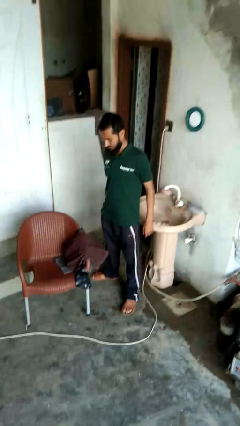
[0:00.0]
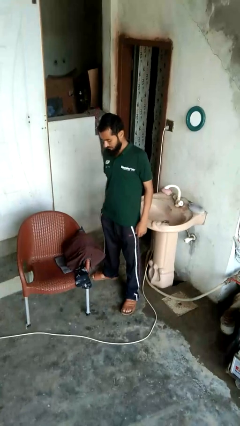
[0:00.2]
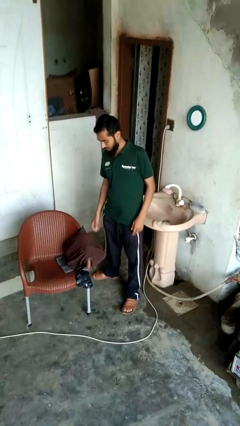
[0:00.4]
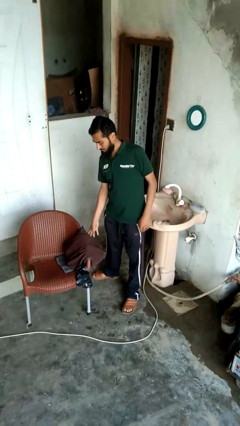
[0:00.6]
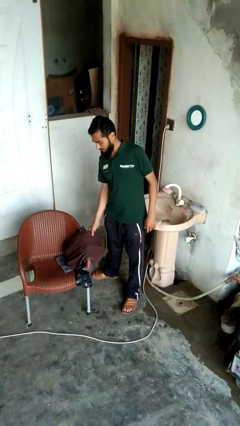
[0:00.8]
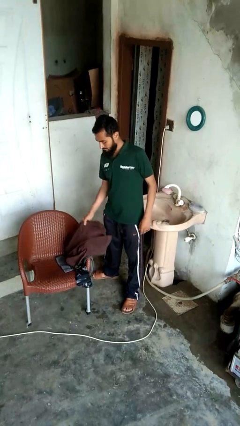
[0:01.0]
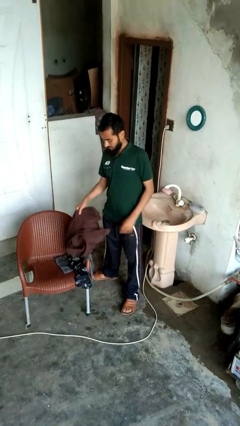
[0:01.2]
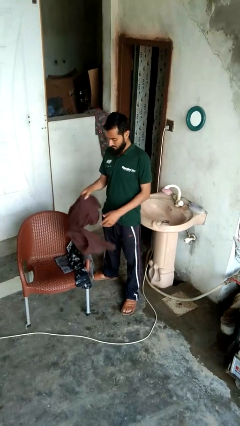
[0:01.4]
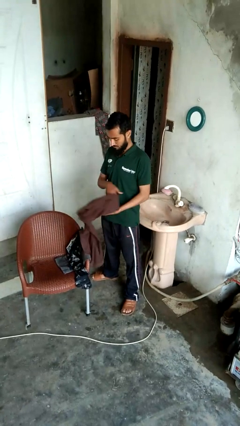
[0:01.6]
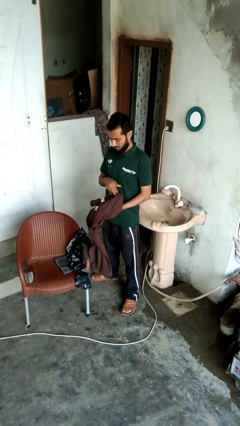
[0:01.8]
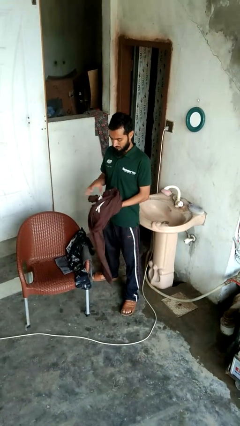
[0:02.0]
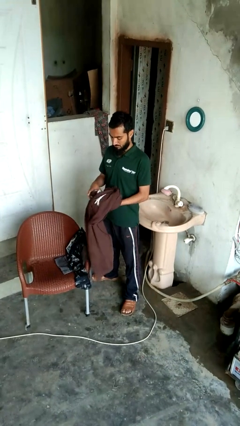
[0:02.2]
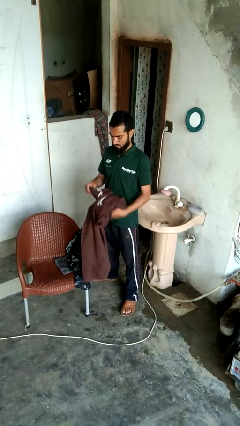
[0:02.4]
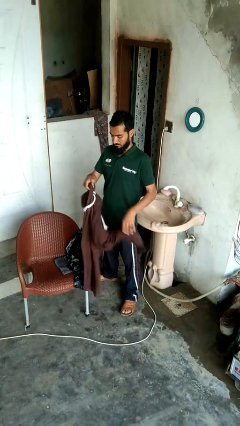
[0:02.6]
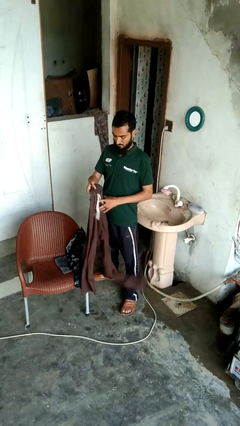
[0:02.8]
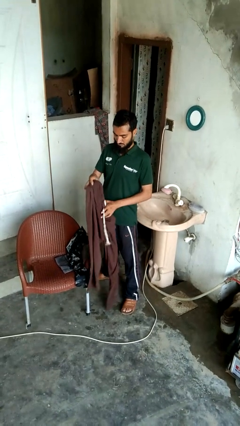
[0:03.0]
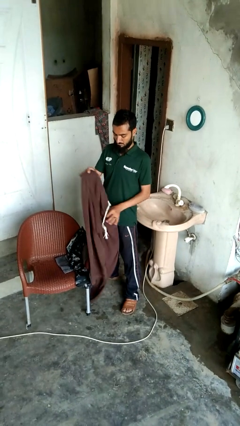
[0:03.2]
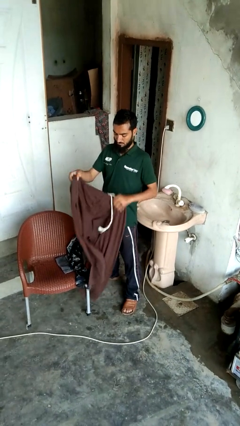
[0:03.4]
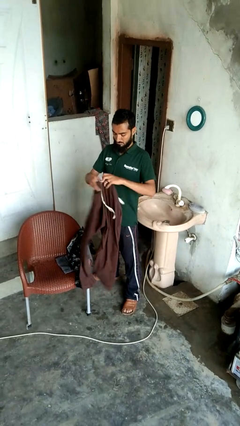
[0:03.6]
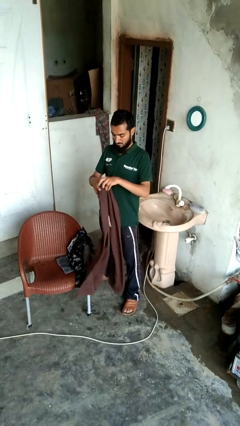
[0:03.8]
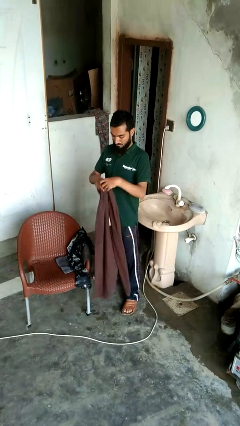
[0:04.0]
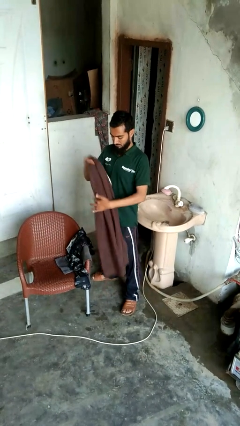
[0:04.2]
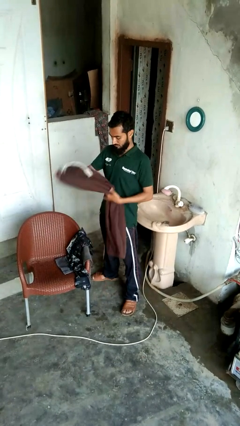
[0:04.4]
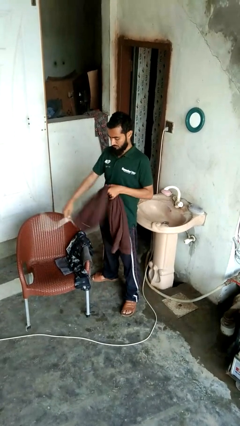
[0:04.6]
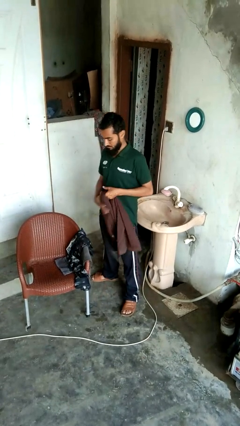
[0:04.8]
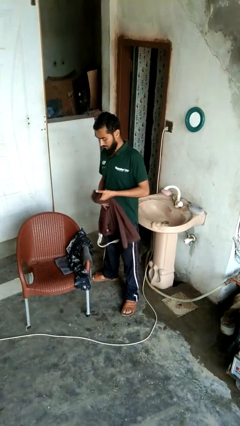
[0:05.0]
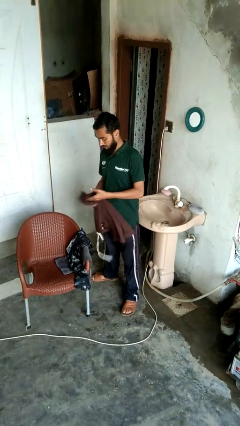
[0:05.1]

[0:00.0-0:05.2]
person folds pants

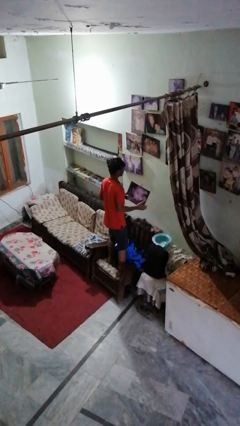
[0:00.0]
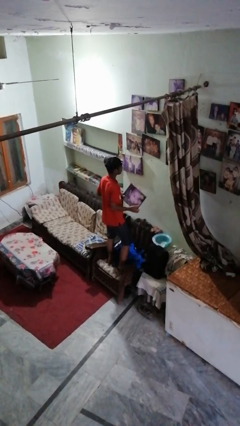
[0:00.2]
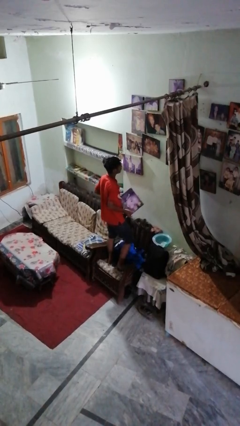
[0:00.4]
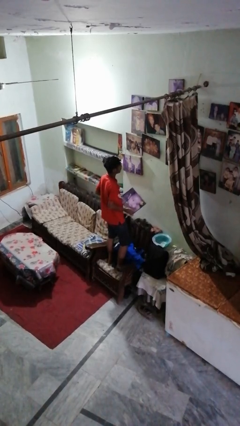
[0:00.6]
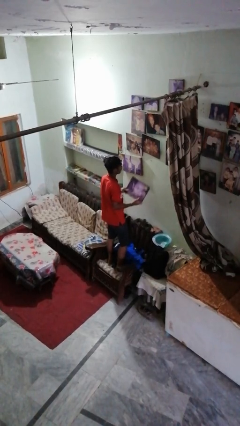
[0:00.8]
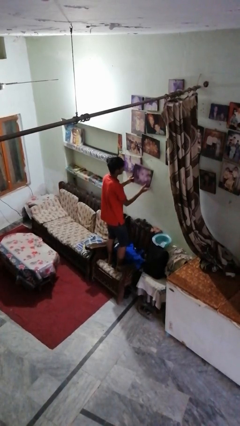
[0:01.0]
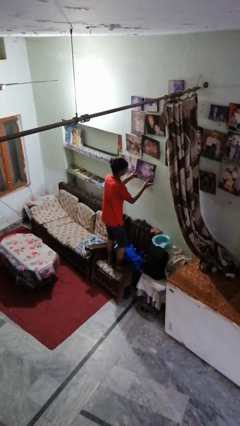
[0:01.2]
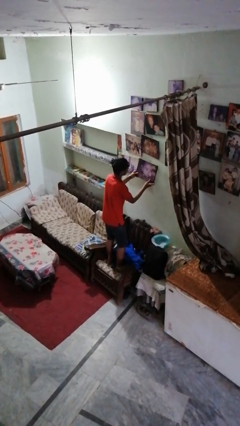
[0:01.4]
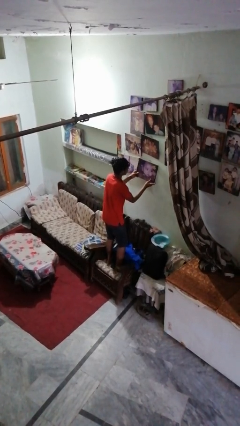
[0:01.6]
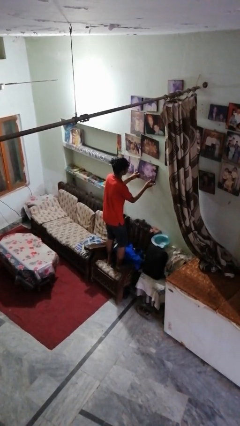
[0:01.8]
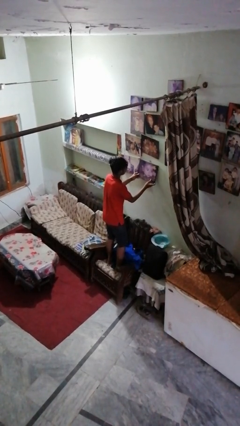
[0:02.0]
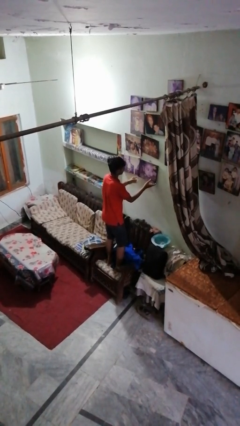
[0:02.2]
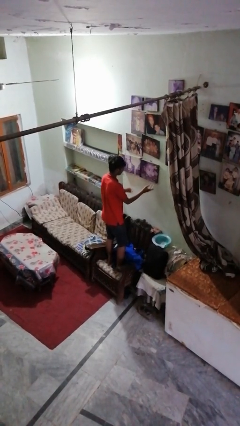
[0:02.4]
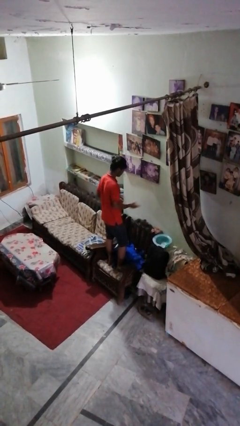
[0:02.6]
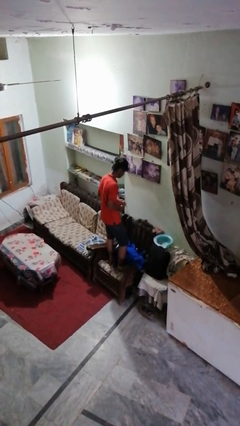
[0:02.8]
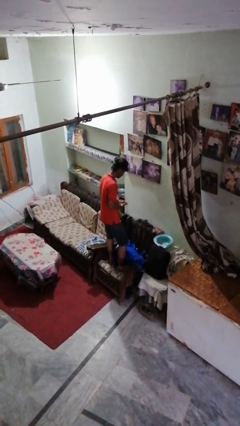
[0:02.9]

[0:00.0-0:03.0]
person puts up picture frame

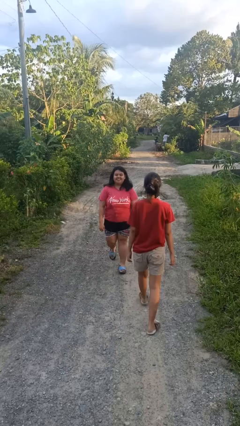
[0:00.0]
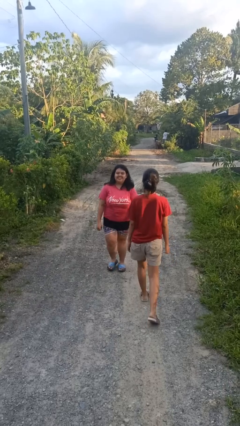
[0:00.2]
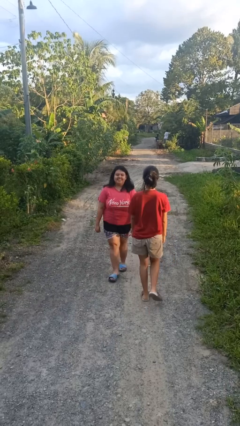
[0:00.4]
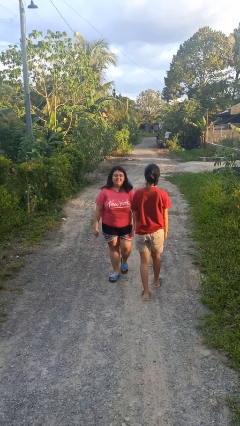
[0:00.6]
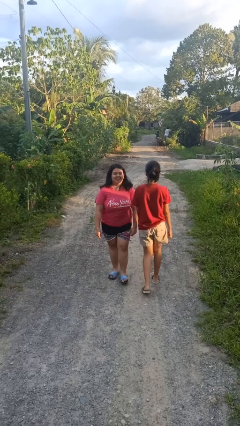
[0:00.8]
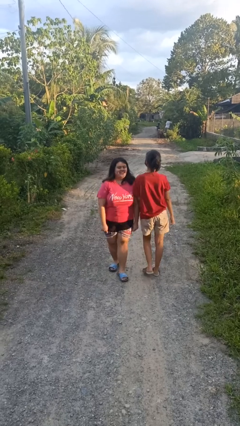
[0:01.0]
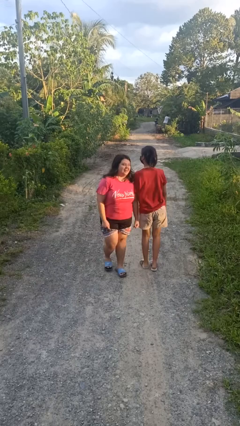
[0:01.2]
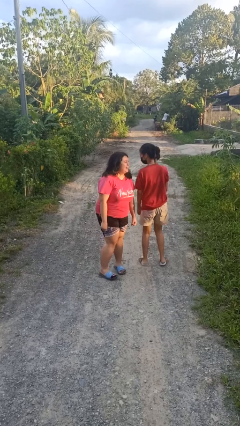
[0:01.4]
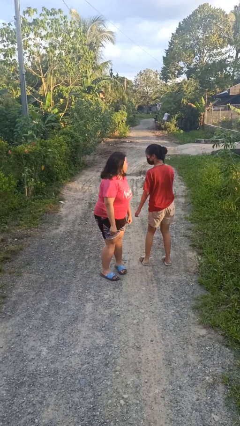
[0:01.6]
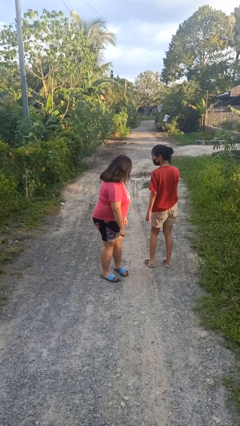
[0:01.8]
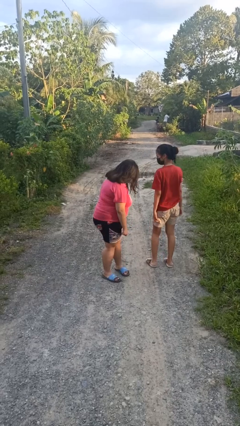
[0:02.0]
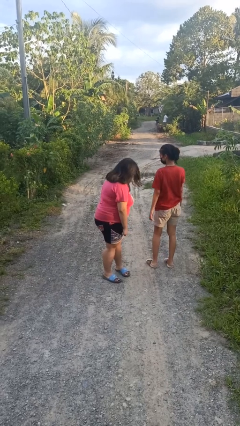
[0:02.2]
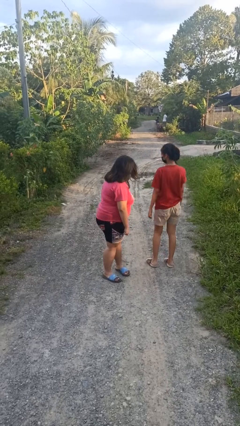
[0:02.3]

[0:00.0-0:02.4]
person bumps into person

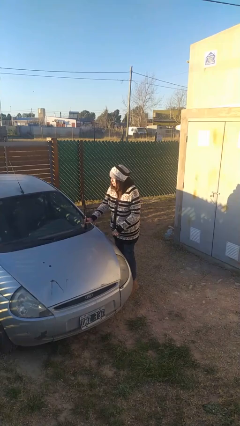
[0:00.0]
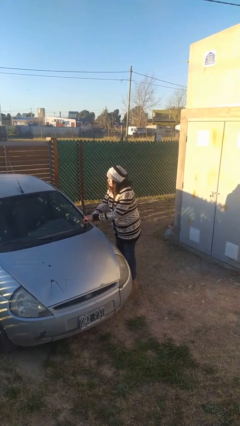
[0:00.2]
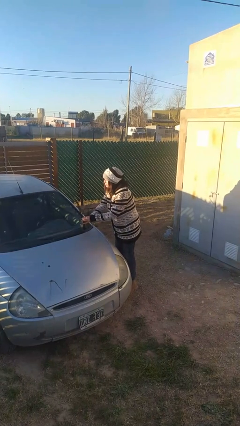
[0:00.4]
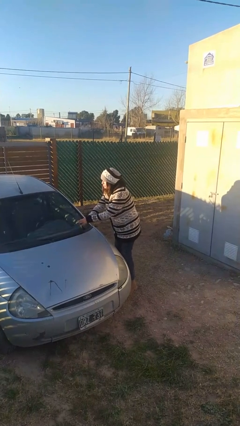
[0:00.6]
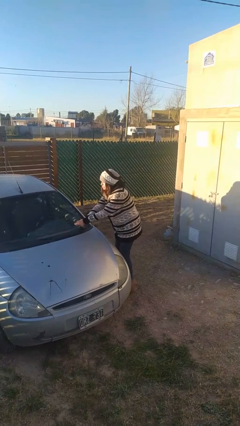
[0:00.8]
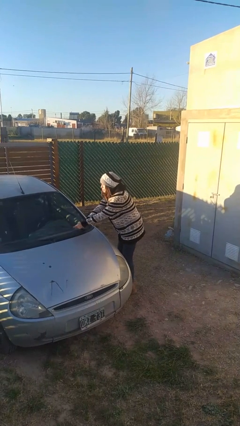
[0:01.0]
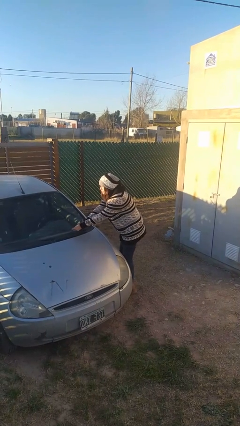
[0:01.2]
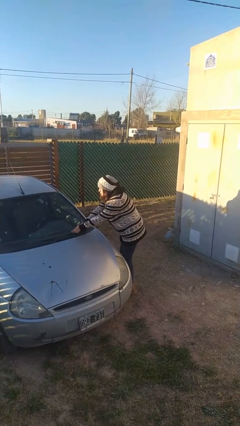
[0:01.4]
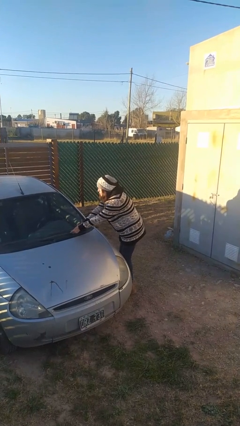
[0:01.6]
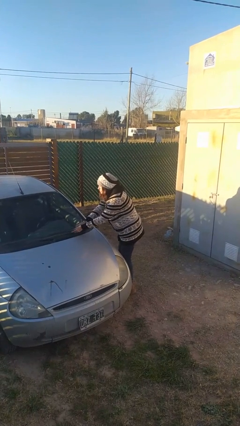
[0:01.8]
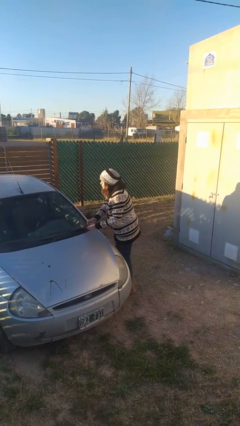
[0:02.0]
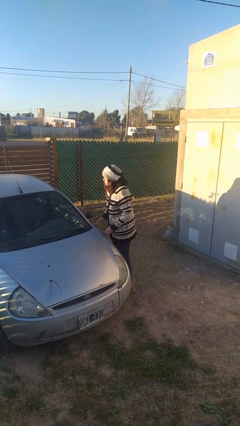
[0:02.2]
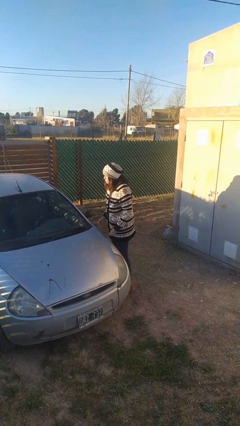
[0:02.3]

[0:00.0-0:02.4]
person flips down car wipers

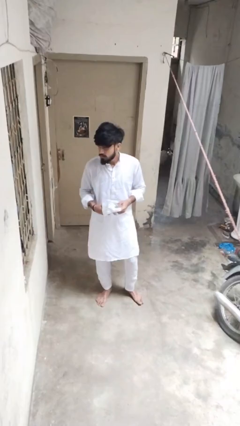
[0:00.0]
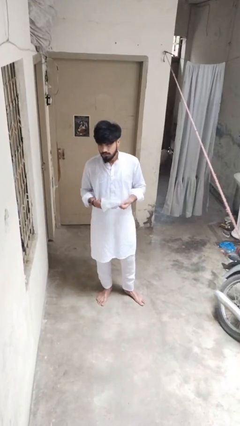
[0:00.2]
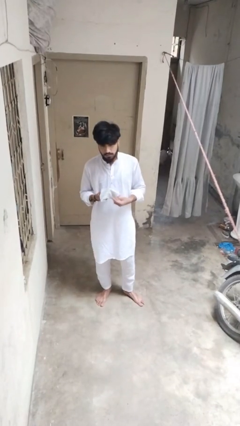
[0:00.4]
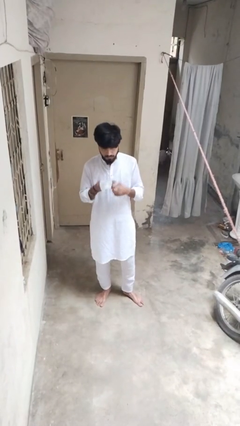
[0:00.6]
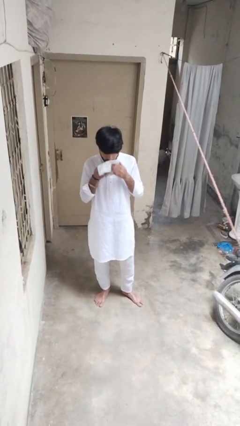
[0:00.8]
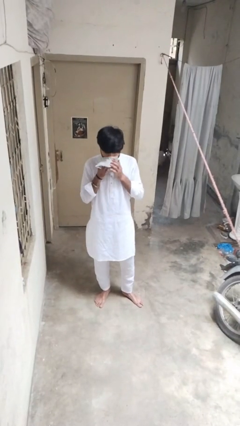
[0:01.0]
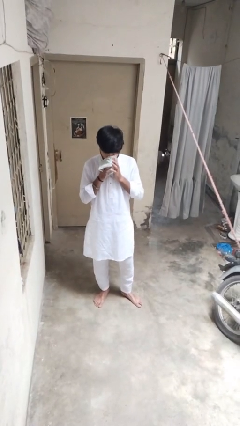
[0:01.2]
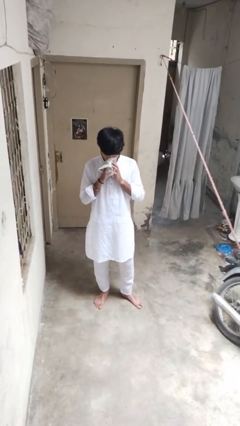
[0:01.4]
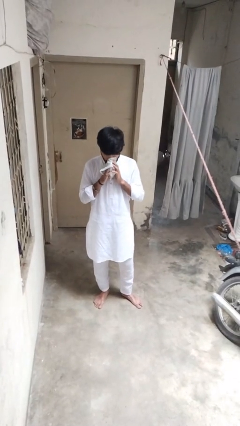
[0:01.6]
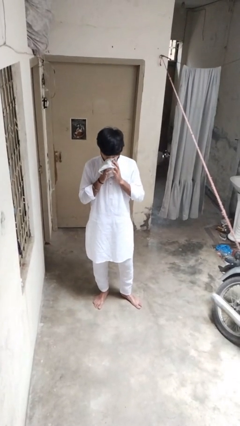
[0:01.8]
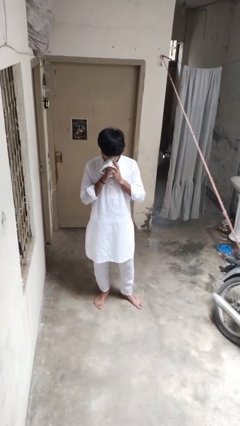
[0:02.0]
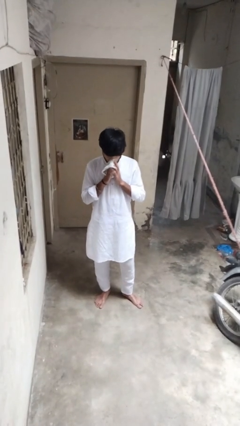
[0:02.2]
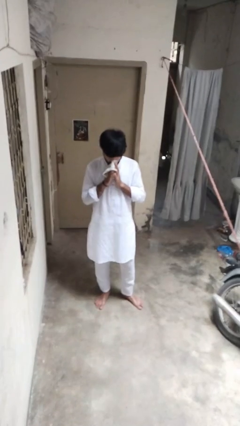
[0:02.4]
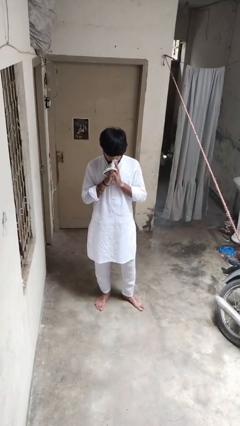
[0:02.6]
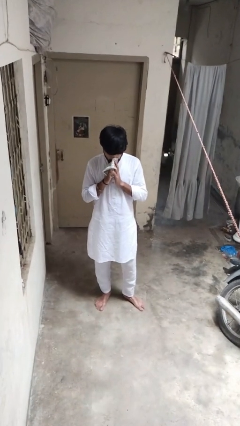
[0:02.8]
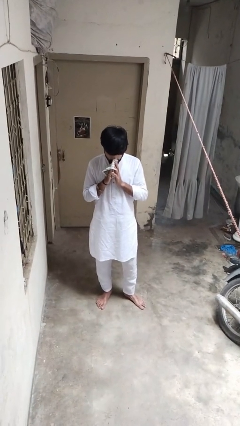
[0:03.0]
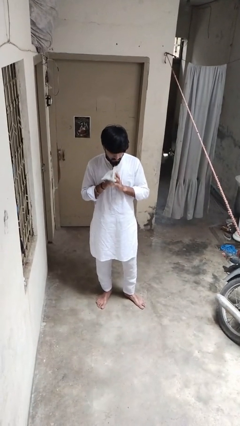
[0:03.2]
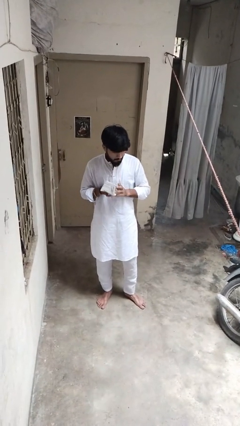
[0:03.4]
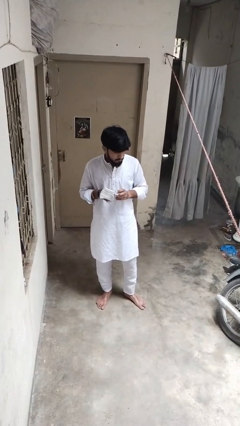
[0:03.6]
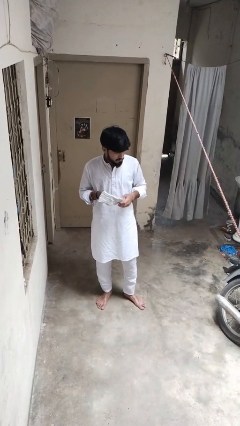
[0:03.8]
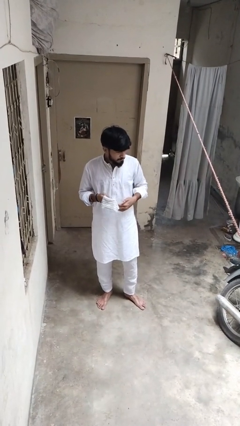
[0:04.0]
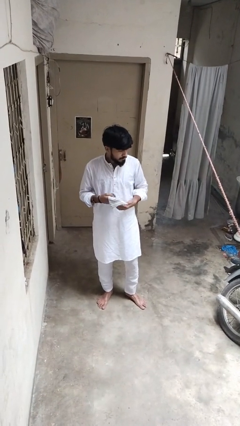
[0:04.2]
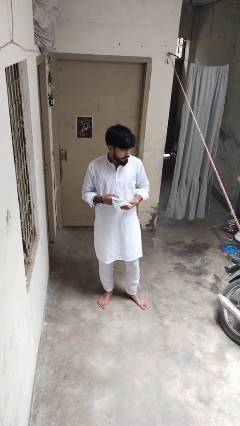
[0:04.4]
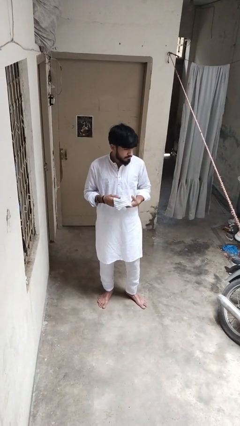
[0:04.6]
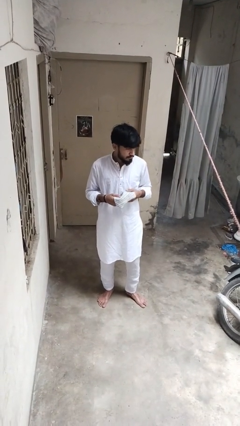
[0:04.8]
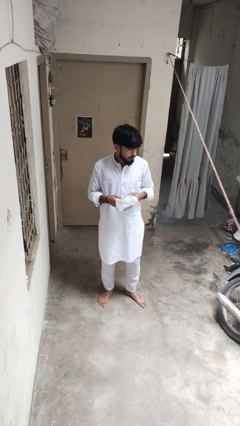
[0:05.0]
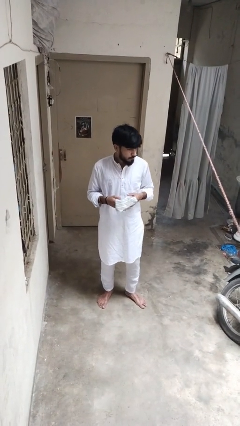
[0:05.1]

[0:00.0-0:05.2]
person blows nose
